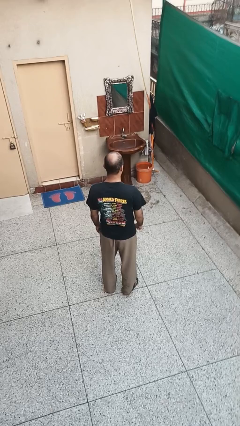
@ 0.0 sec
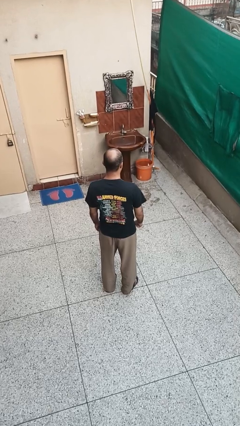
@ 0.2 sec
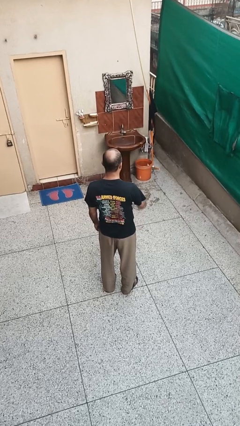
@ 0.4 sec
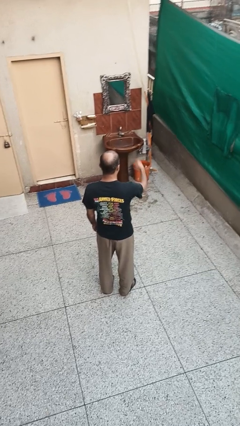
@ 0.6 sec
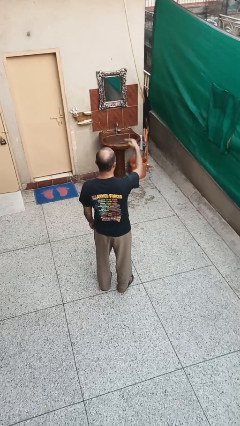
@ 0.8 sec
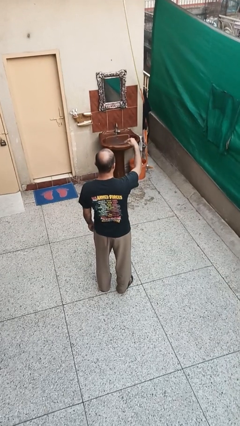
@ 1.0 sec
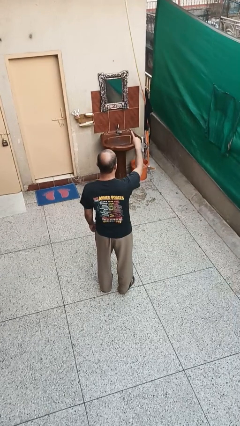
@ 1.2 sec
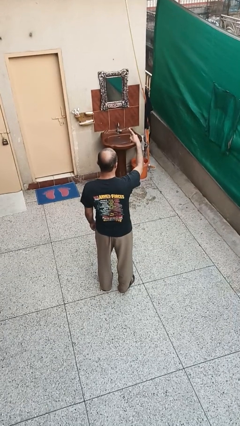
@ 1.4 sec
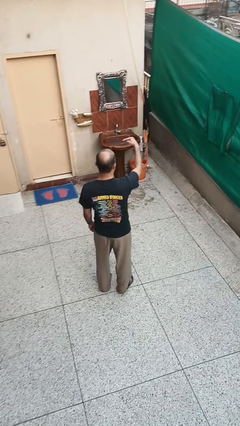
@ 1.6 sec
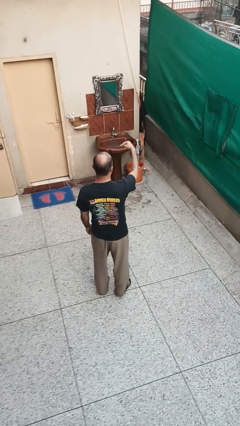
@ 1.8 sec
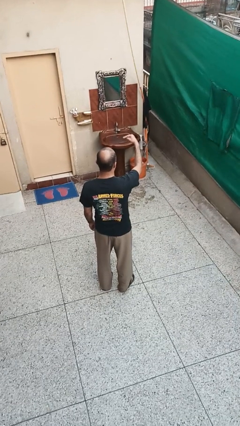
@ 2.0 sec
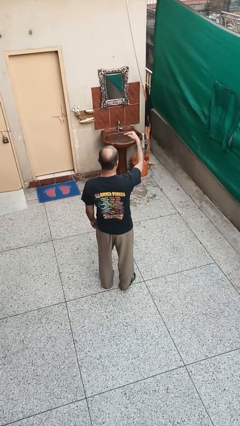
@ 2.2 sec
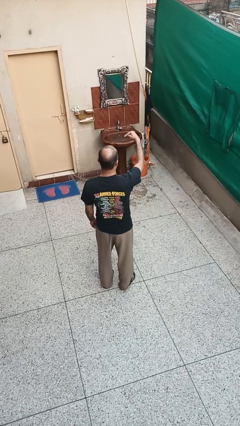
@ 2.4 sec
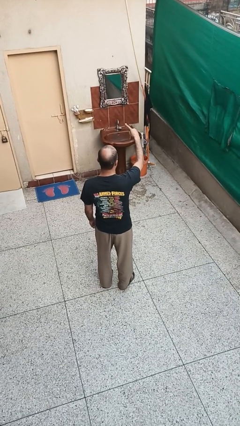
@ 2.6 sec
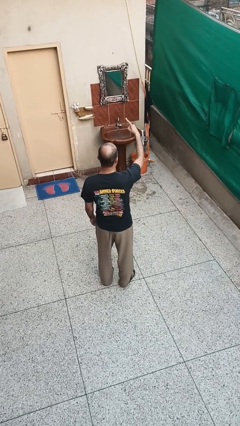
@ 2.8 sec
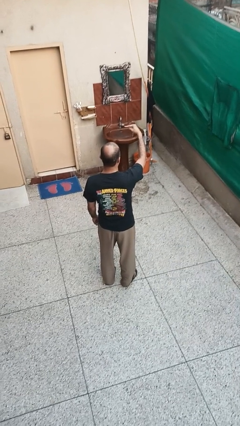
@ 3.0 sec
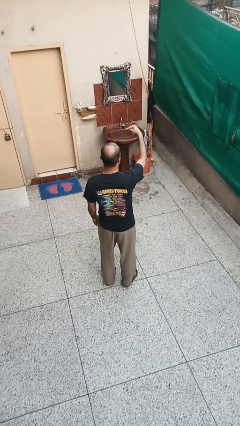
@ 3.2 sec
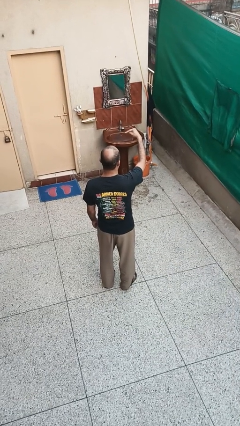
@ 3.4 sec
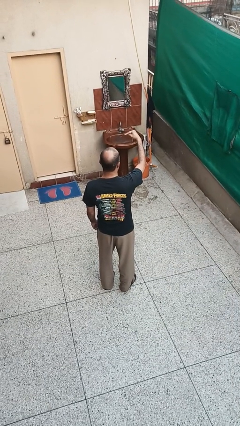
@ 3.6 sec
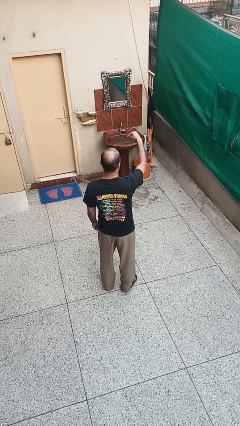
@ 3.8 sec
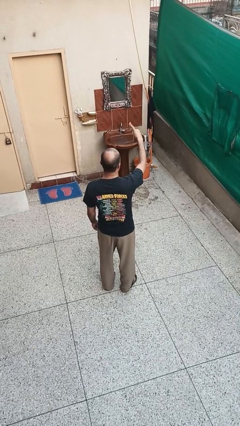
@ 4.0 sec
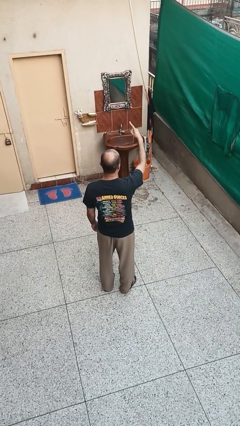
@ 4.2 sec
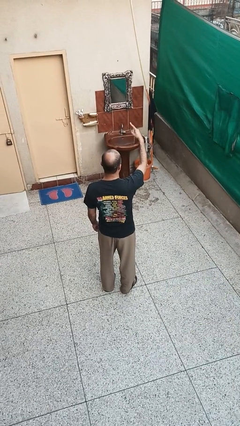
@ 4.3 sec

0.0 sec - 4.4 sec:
person gestures swipe up

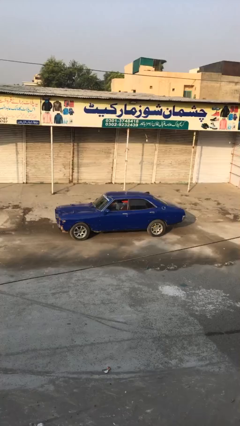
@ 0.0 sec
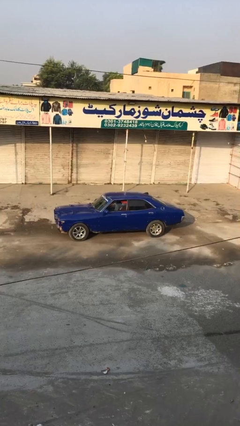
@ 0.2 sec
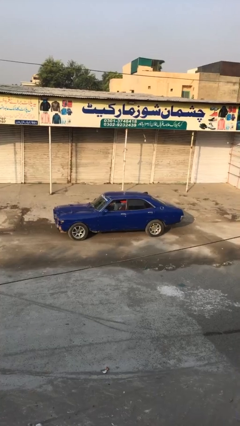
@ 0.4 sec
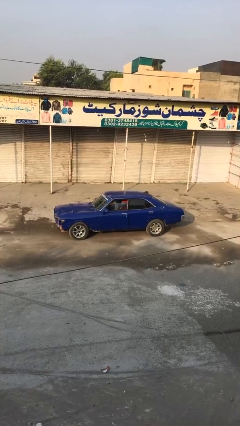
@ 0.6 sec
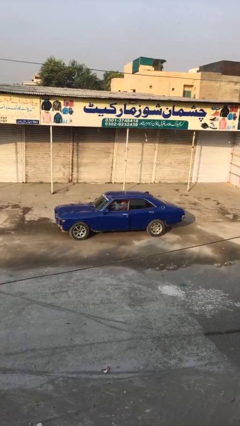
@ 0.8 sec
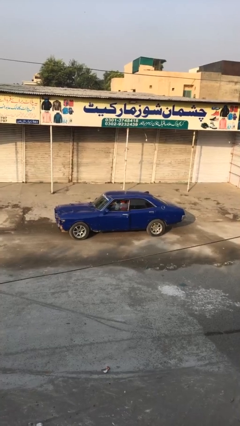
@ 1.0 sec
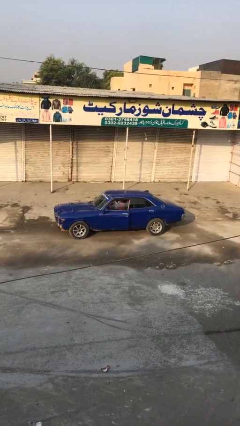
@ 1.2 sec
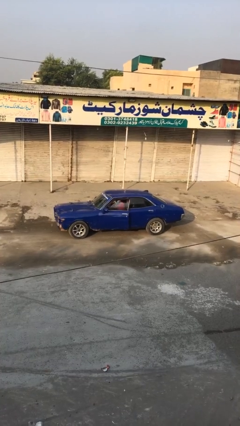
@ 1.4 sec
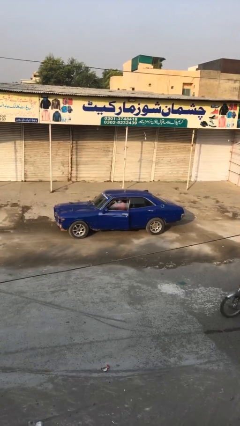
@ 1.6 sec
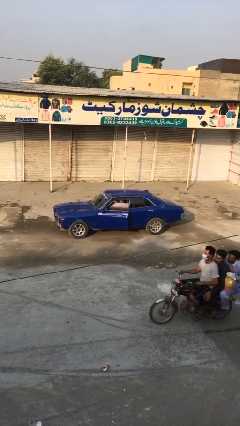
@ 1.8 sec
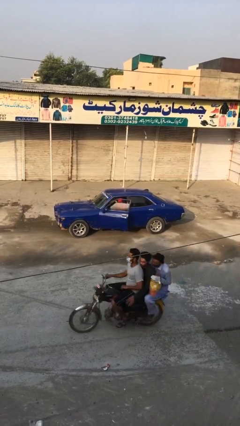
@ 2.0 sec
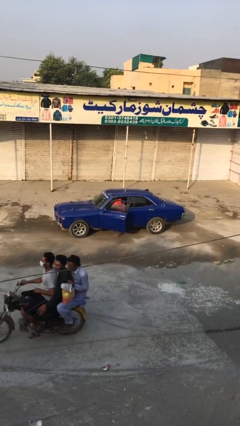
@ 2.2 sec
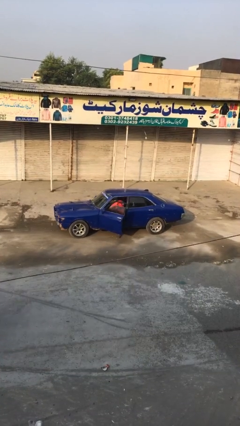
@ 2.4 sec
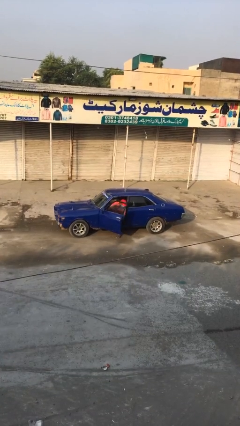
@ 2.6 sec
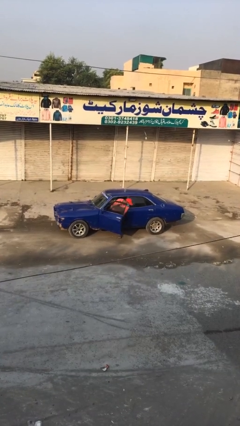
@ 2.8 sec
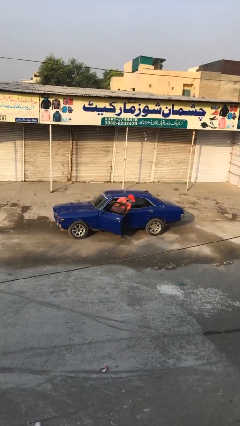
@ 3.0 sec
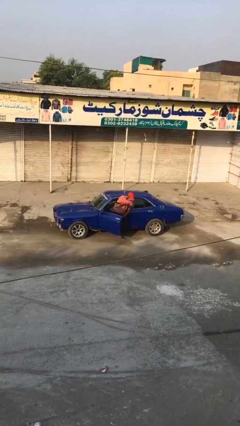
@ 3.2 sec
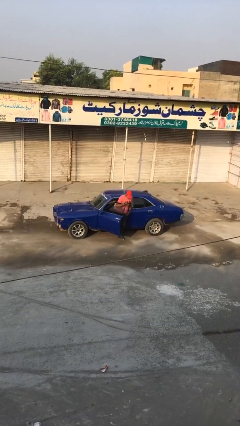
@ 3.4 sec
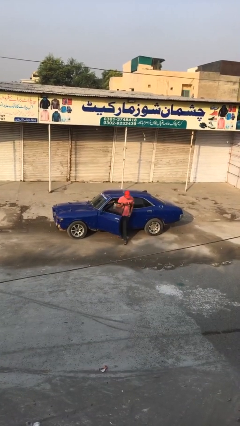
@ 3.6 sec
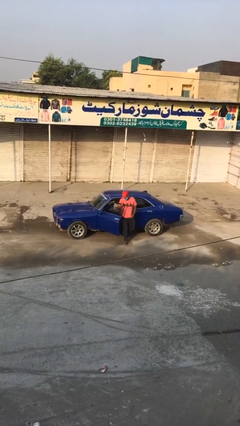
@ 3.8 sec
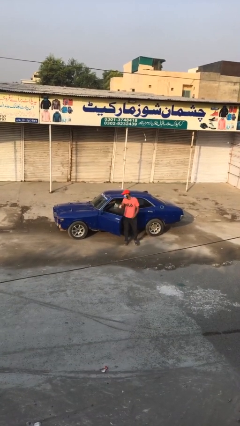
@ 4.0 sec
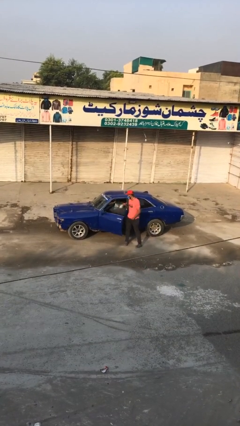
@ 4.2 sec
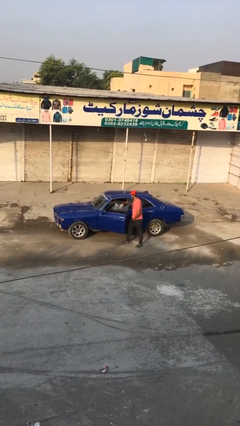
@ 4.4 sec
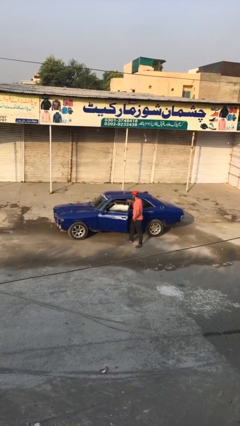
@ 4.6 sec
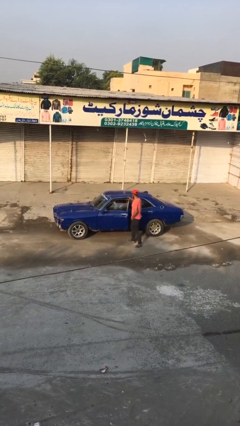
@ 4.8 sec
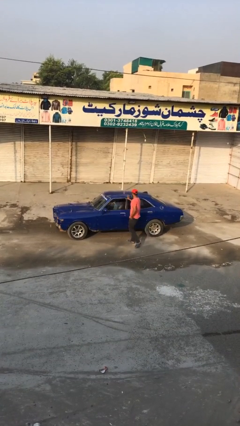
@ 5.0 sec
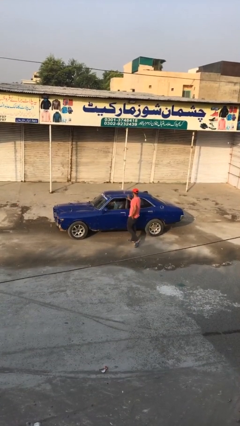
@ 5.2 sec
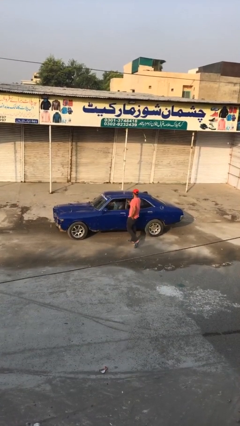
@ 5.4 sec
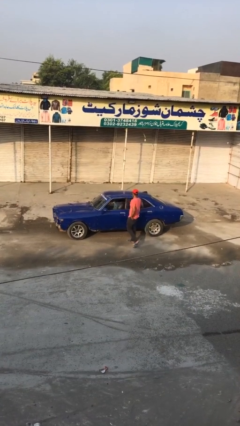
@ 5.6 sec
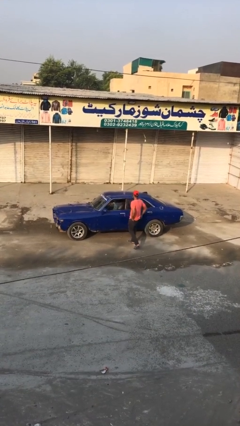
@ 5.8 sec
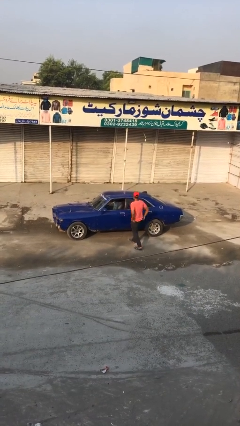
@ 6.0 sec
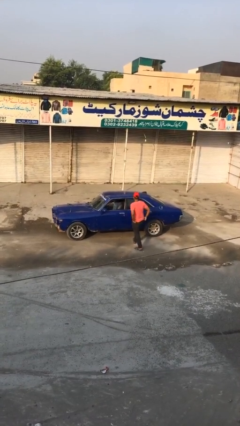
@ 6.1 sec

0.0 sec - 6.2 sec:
car drops off person

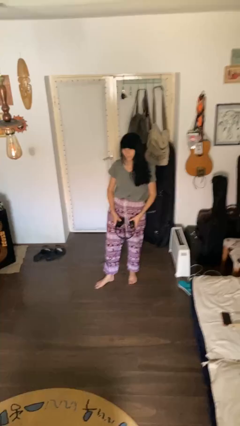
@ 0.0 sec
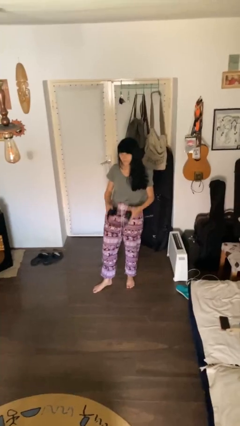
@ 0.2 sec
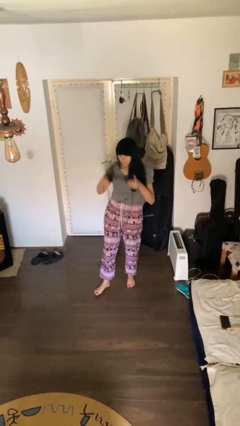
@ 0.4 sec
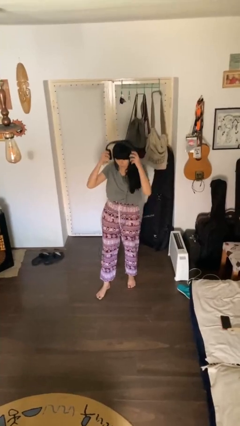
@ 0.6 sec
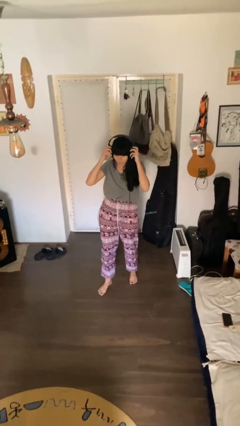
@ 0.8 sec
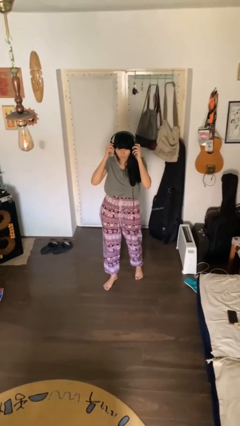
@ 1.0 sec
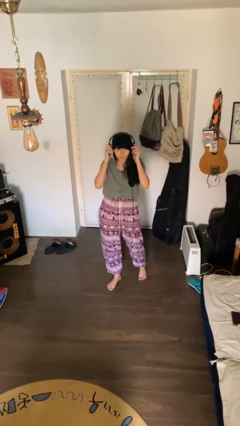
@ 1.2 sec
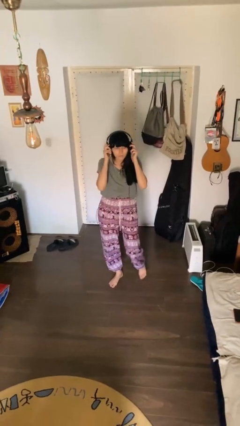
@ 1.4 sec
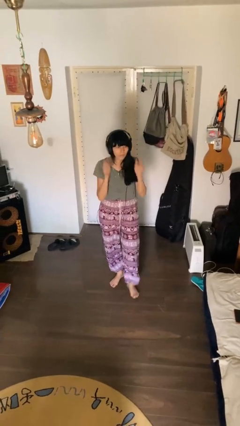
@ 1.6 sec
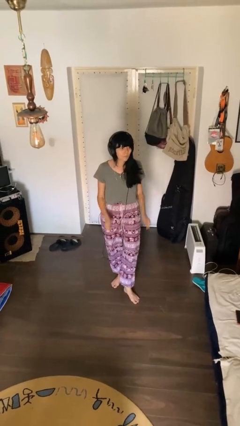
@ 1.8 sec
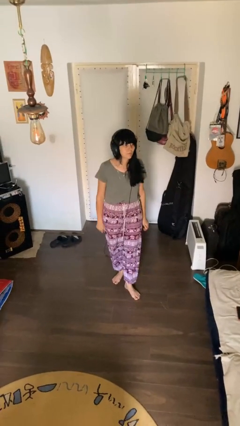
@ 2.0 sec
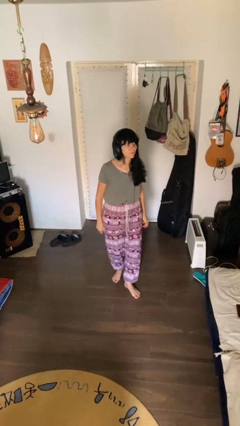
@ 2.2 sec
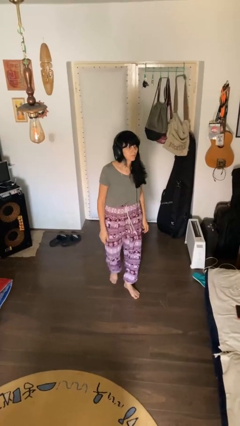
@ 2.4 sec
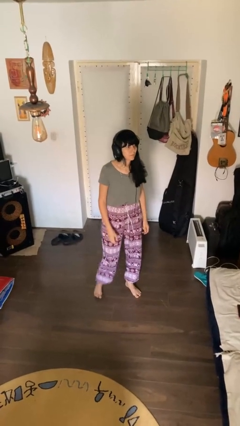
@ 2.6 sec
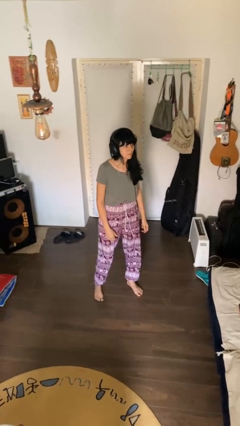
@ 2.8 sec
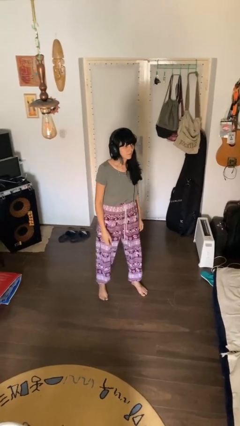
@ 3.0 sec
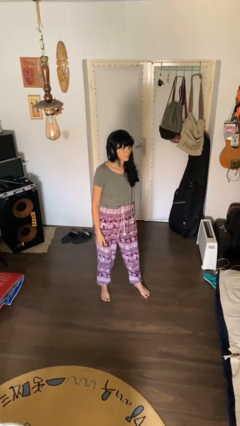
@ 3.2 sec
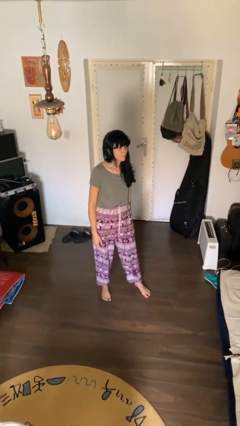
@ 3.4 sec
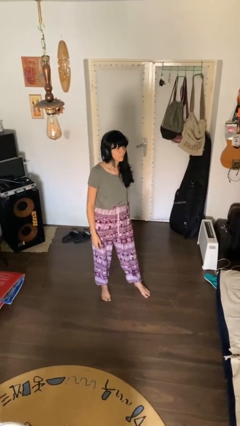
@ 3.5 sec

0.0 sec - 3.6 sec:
person puts on headphones

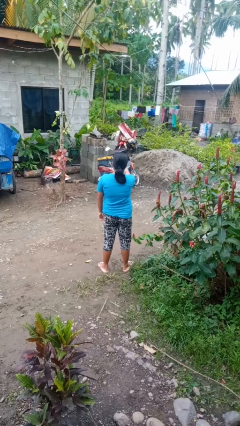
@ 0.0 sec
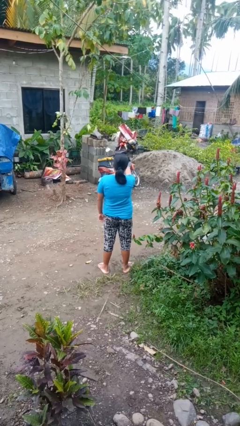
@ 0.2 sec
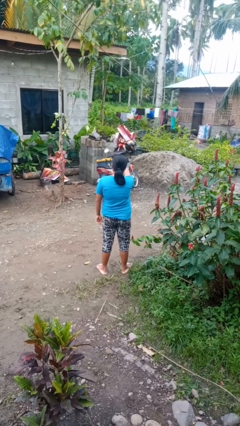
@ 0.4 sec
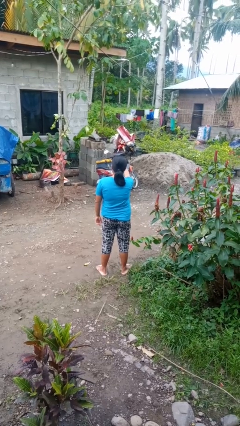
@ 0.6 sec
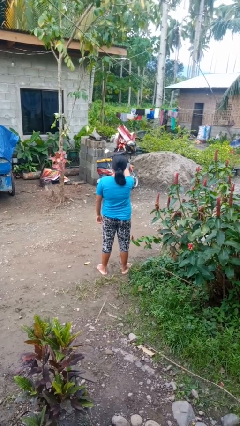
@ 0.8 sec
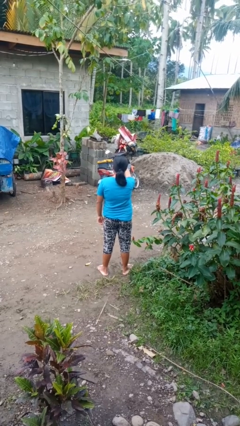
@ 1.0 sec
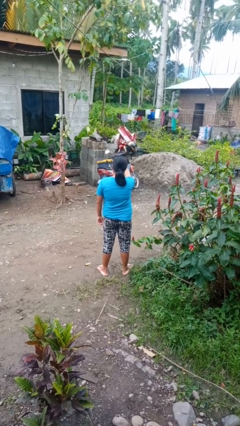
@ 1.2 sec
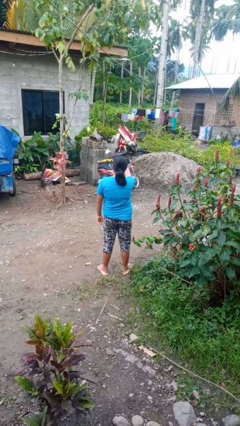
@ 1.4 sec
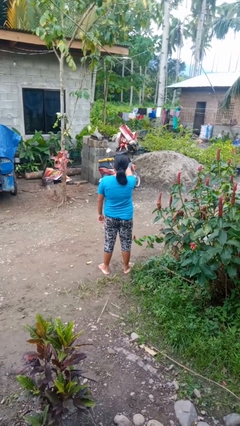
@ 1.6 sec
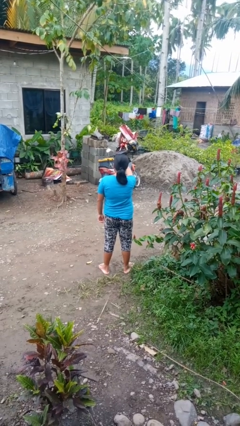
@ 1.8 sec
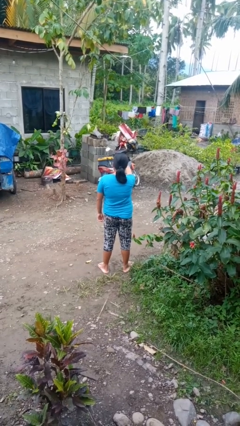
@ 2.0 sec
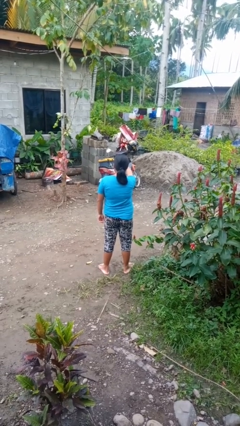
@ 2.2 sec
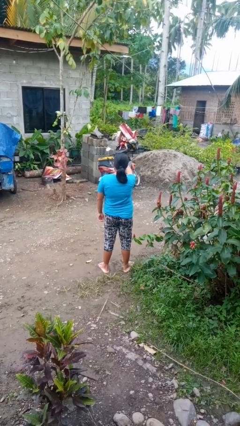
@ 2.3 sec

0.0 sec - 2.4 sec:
person gestures thumbs up

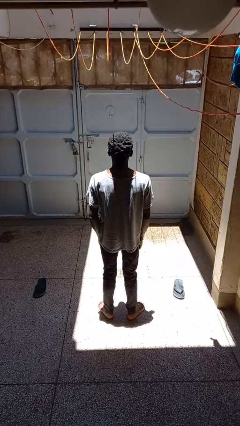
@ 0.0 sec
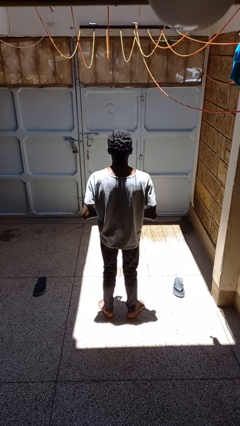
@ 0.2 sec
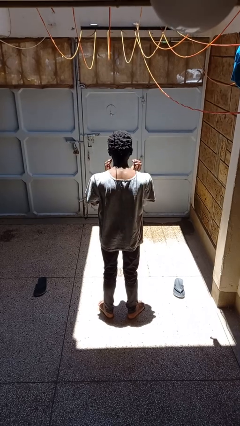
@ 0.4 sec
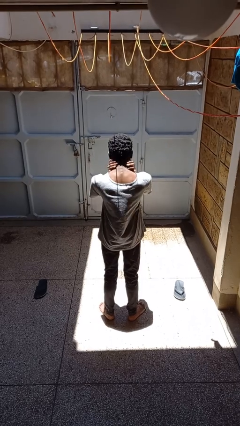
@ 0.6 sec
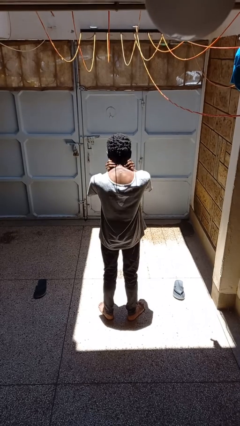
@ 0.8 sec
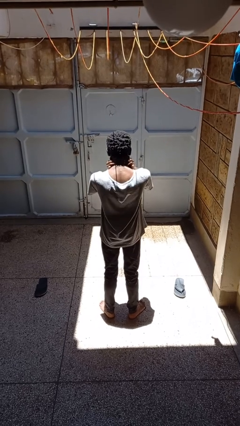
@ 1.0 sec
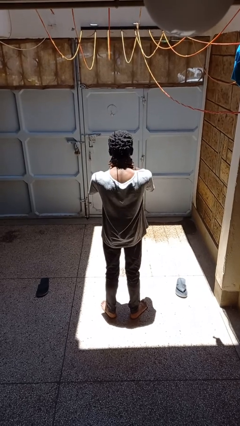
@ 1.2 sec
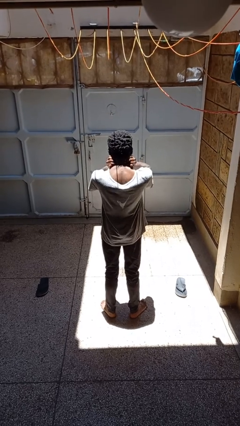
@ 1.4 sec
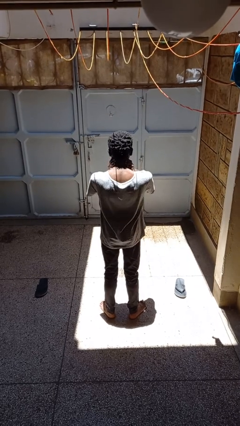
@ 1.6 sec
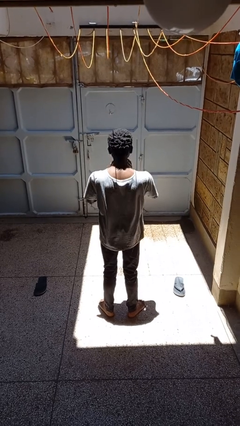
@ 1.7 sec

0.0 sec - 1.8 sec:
person rubs neck
